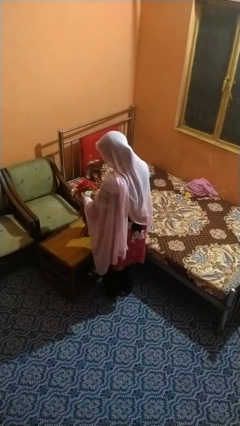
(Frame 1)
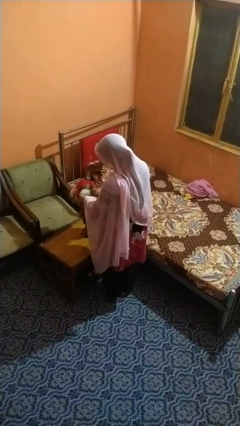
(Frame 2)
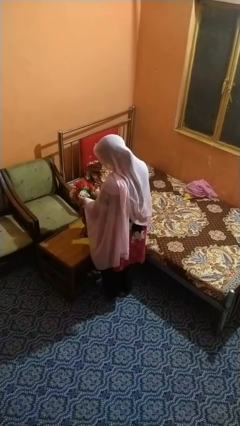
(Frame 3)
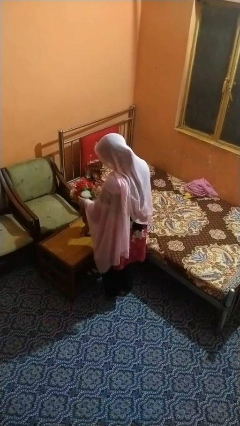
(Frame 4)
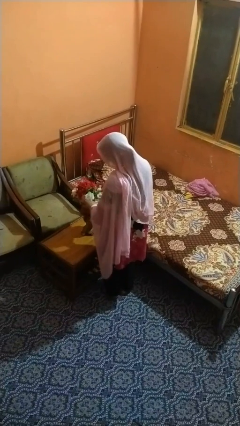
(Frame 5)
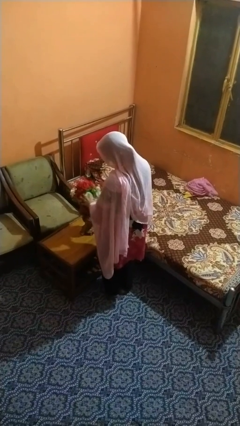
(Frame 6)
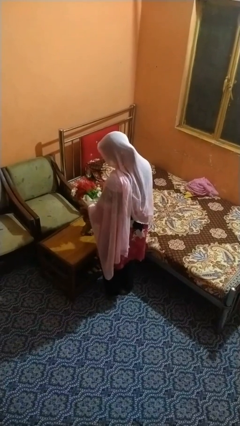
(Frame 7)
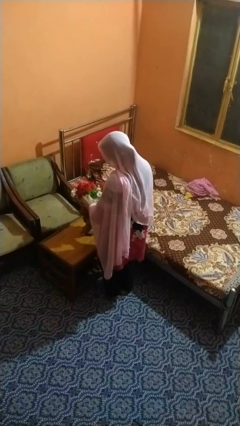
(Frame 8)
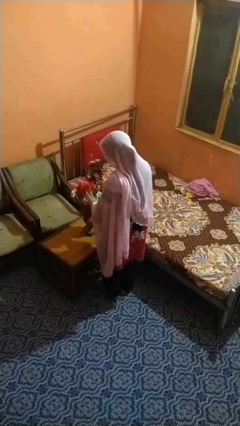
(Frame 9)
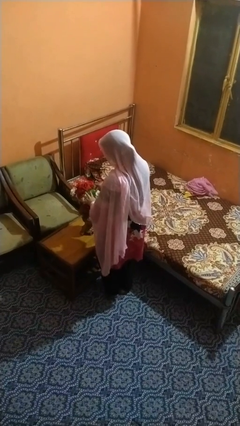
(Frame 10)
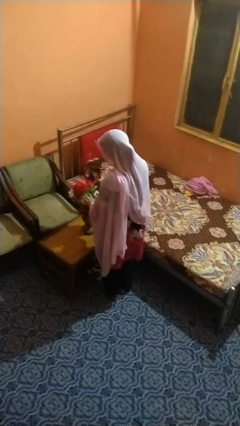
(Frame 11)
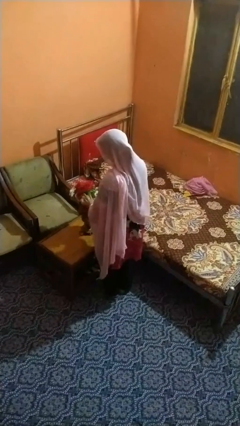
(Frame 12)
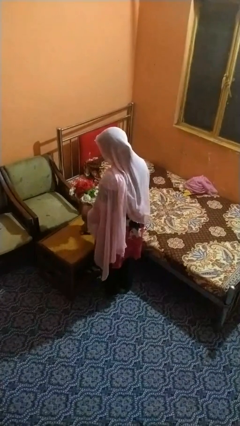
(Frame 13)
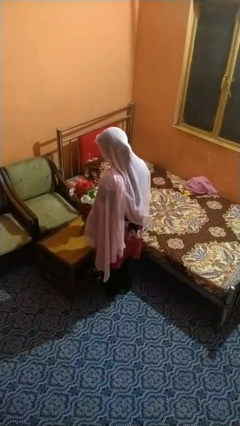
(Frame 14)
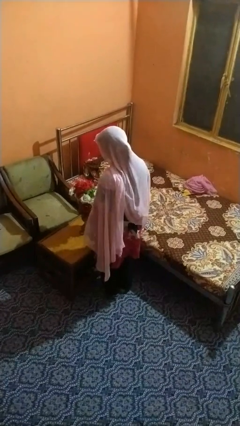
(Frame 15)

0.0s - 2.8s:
person arranges flowers in vase

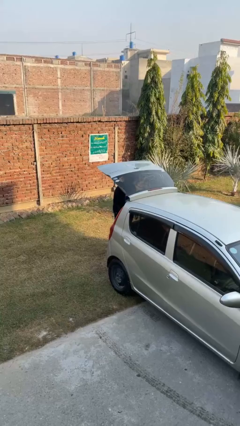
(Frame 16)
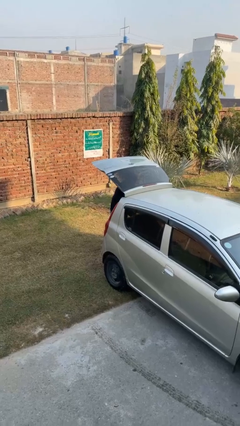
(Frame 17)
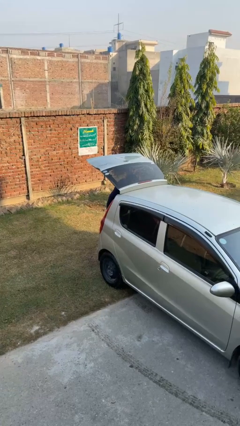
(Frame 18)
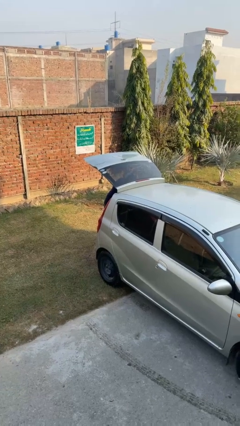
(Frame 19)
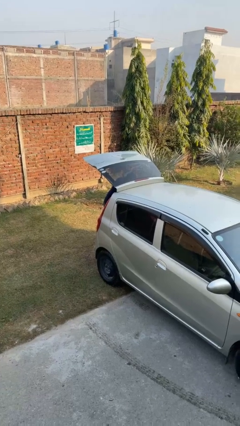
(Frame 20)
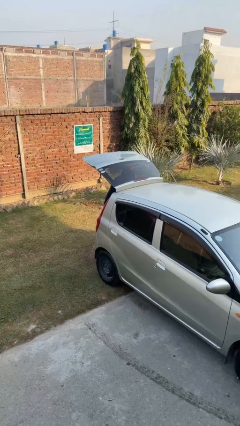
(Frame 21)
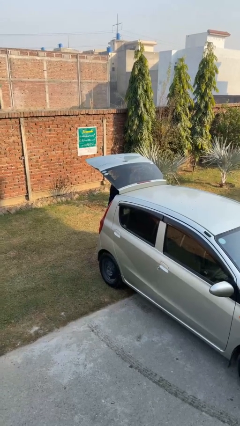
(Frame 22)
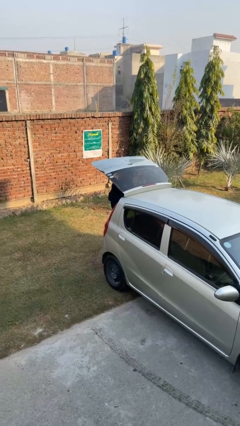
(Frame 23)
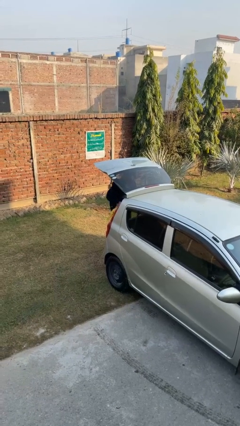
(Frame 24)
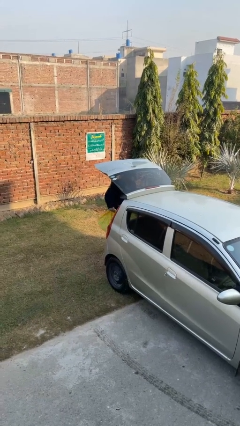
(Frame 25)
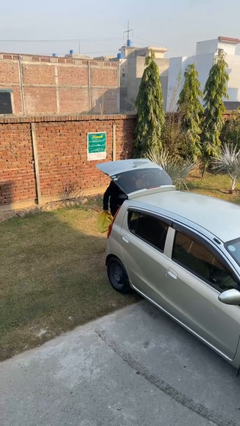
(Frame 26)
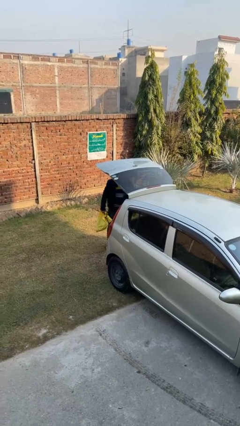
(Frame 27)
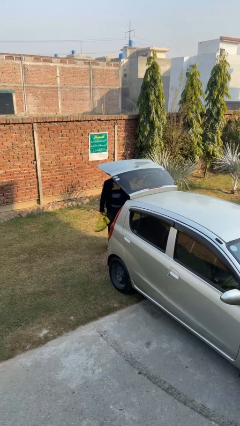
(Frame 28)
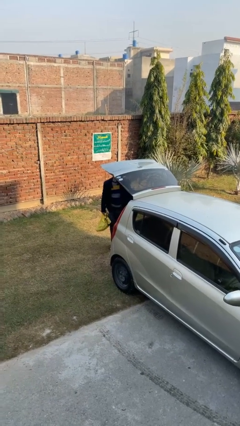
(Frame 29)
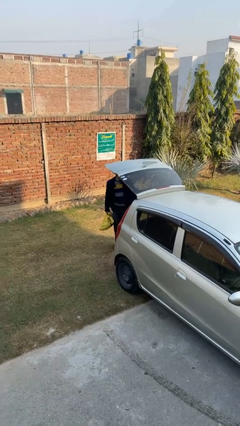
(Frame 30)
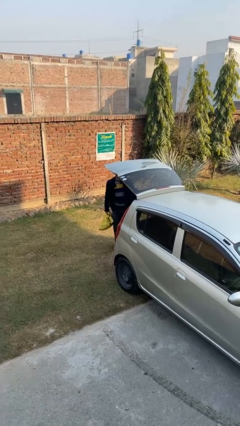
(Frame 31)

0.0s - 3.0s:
person unloads car

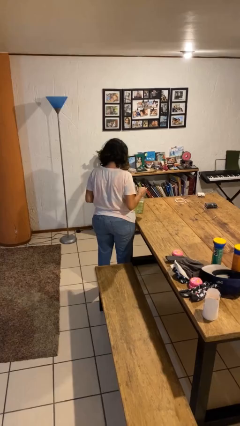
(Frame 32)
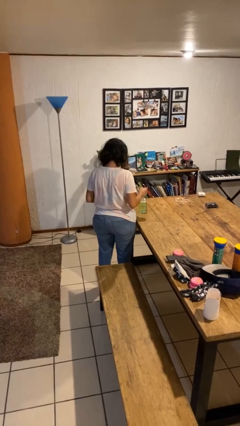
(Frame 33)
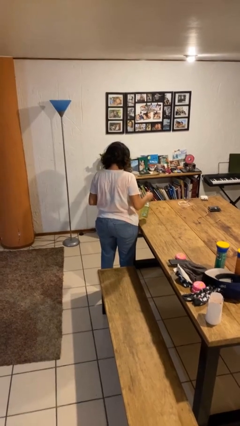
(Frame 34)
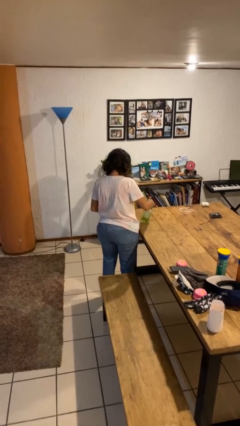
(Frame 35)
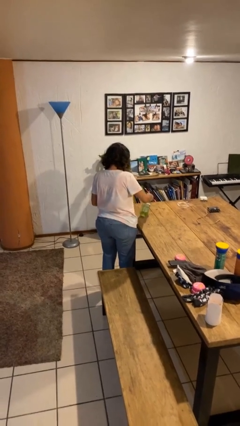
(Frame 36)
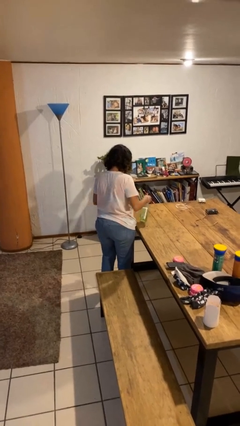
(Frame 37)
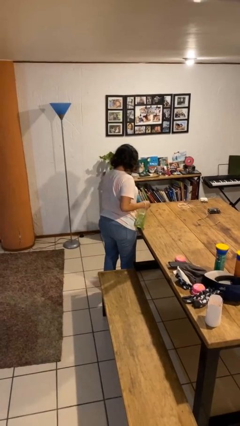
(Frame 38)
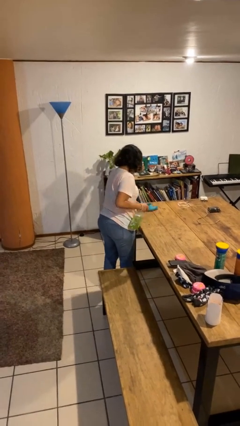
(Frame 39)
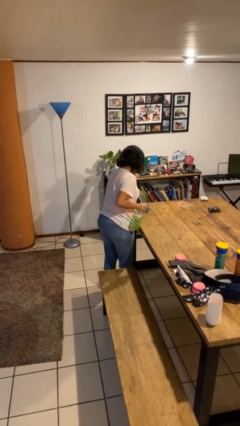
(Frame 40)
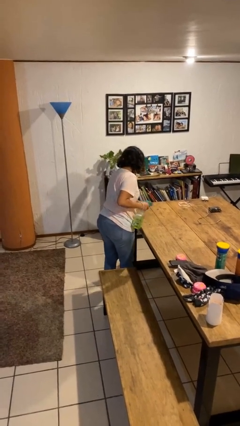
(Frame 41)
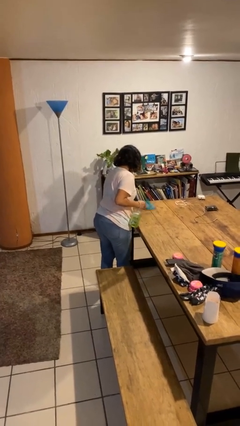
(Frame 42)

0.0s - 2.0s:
person sprays from bottle

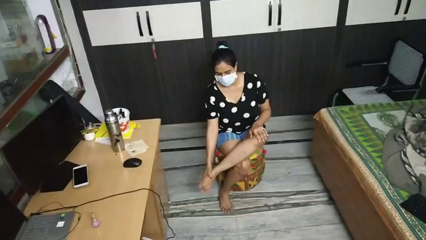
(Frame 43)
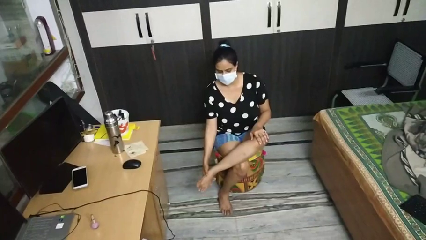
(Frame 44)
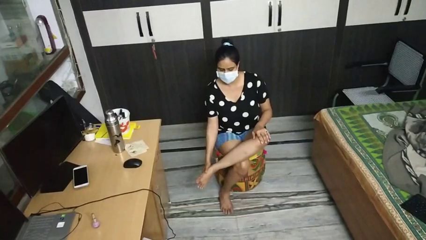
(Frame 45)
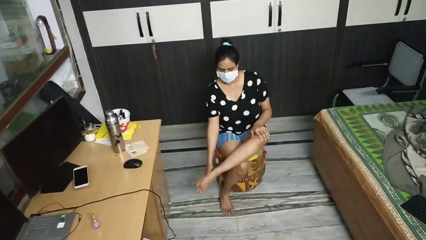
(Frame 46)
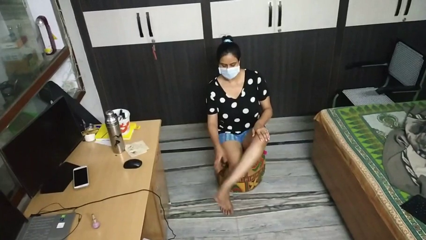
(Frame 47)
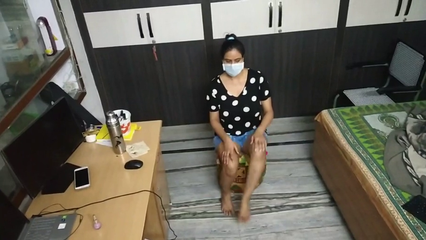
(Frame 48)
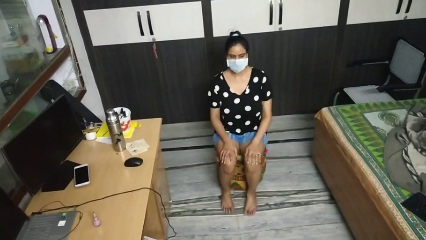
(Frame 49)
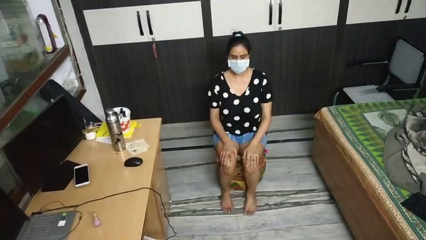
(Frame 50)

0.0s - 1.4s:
person rubs foot

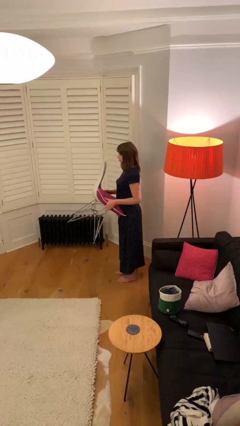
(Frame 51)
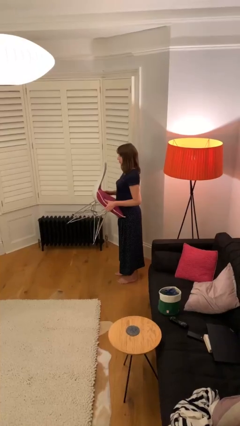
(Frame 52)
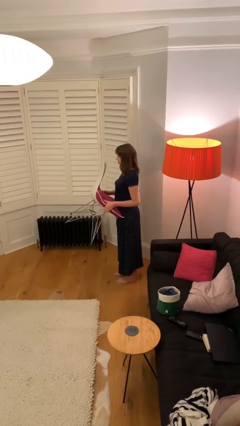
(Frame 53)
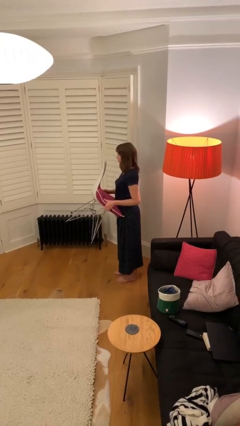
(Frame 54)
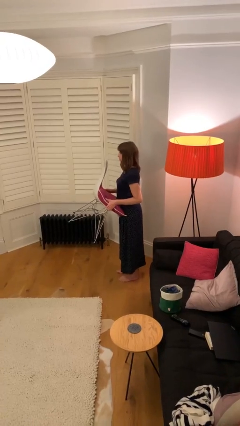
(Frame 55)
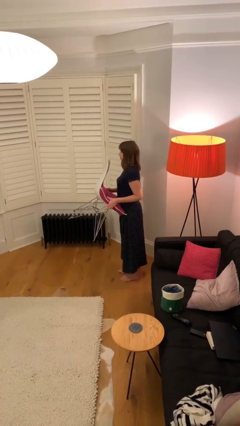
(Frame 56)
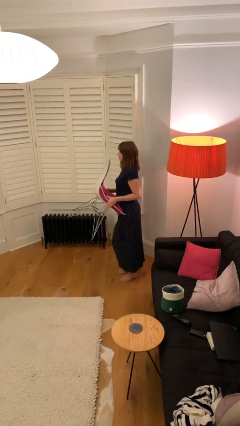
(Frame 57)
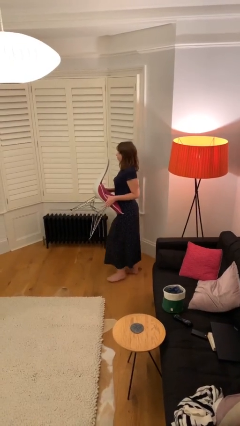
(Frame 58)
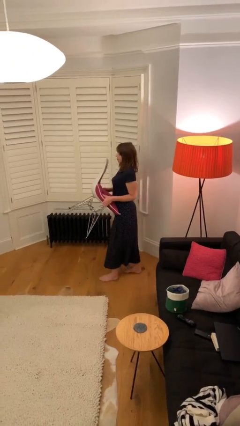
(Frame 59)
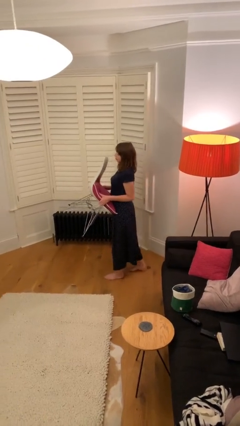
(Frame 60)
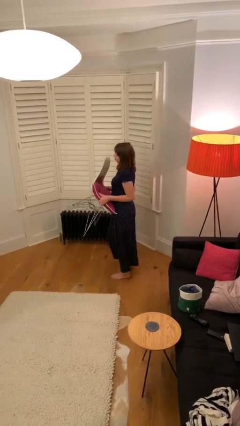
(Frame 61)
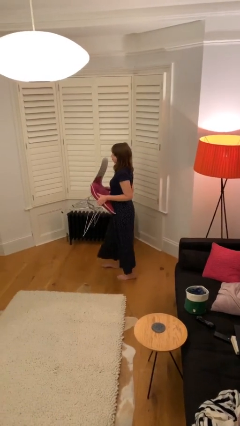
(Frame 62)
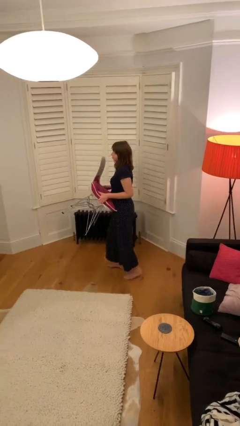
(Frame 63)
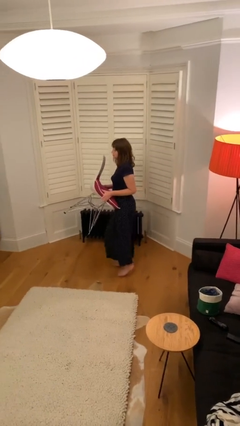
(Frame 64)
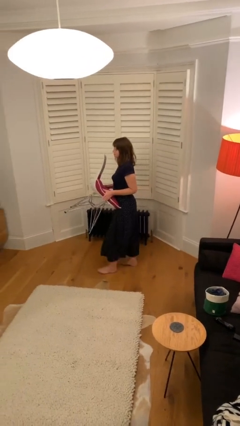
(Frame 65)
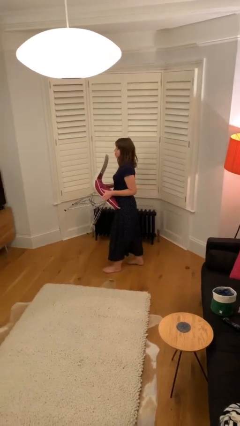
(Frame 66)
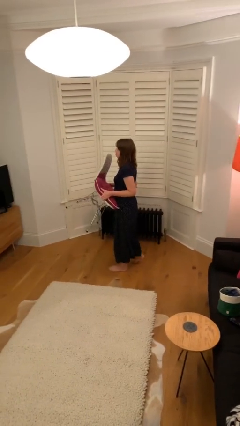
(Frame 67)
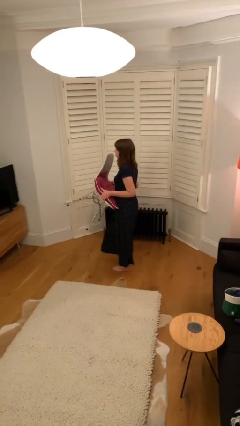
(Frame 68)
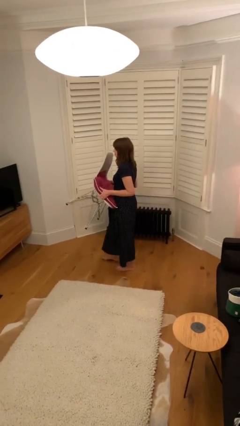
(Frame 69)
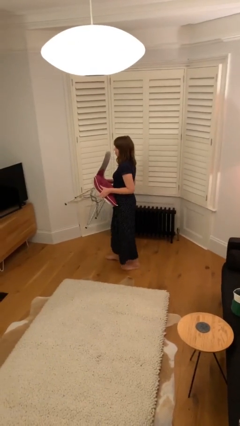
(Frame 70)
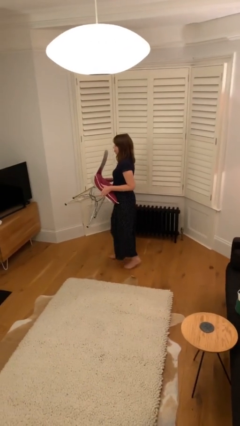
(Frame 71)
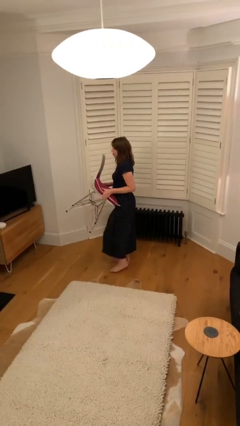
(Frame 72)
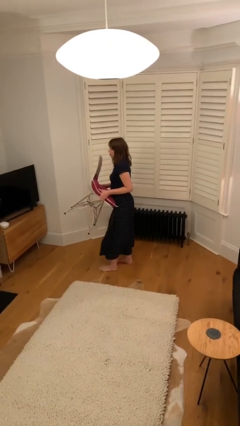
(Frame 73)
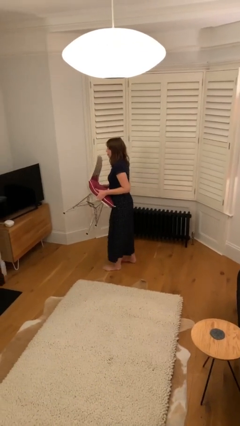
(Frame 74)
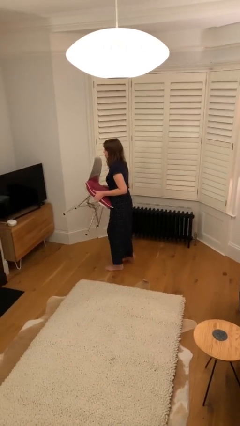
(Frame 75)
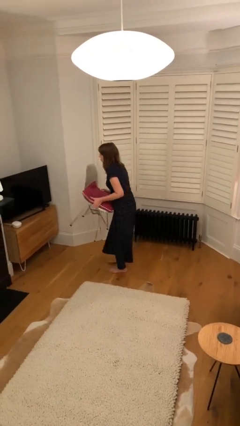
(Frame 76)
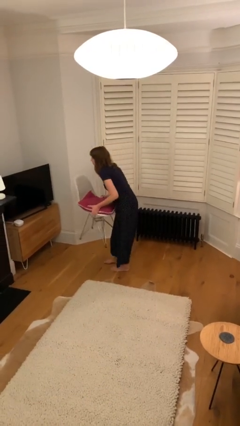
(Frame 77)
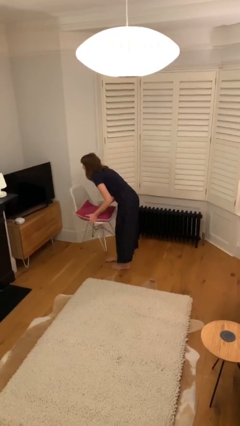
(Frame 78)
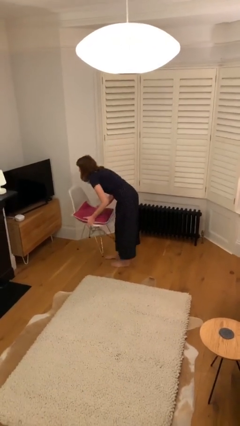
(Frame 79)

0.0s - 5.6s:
person carries heavy object

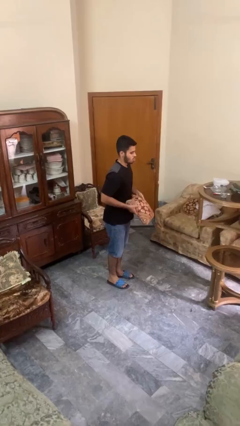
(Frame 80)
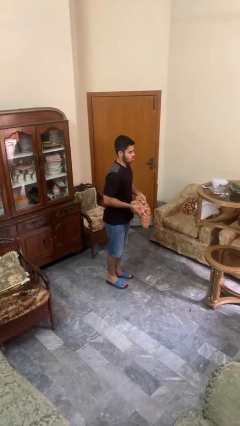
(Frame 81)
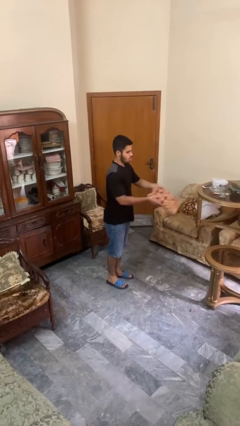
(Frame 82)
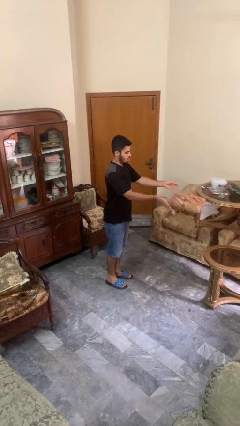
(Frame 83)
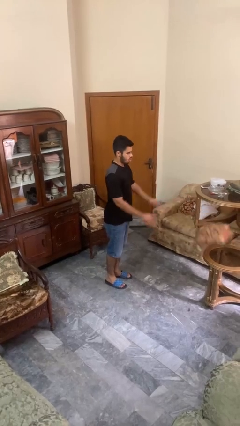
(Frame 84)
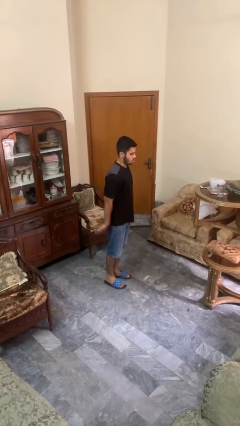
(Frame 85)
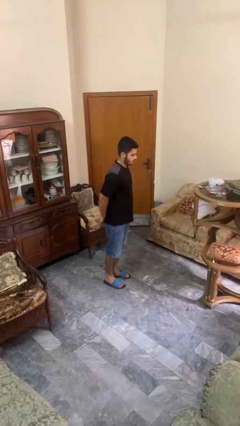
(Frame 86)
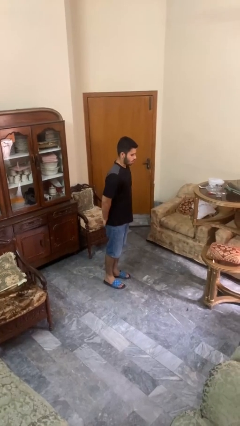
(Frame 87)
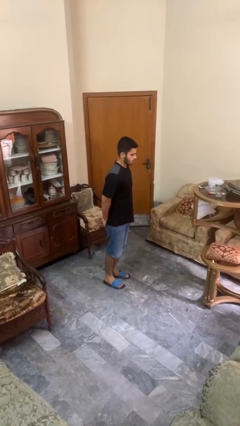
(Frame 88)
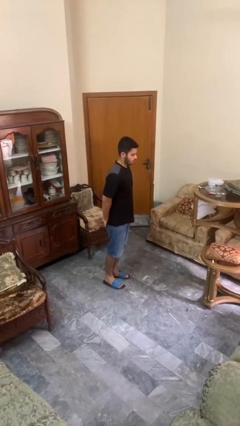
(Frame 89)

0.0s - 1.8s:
person throws object on table

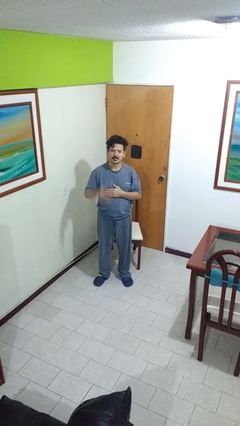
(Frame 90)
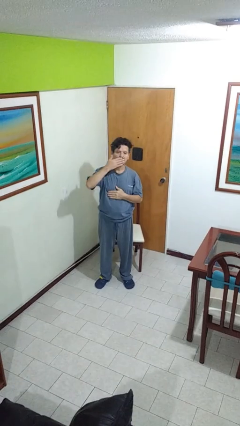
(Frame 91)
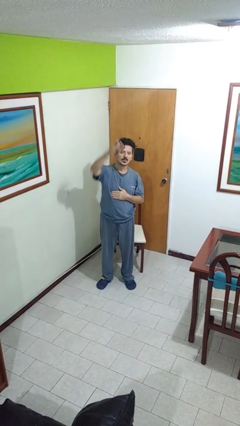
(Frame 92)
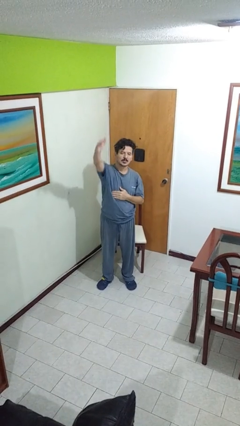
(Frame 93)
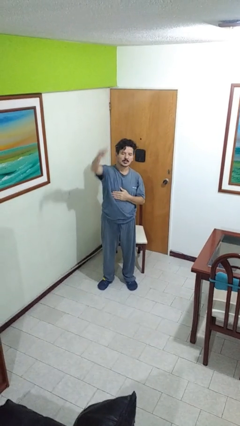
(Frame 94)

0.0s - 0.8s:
person gestures blow kiss
